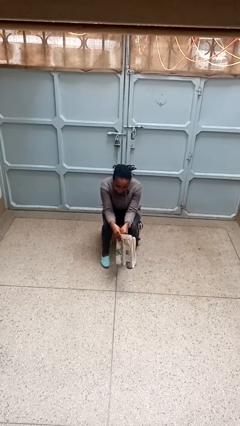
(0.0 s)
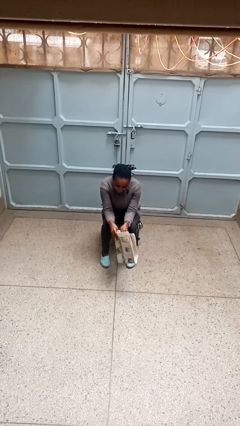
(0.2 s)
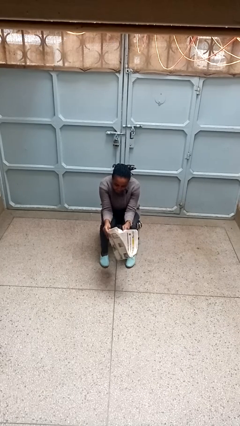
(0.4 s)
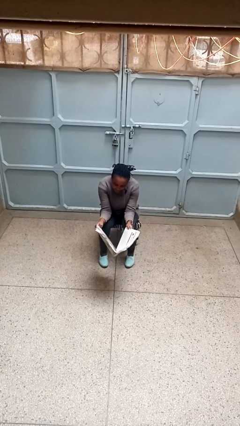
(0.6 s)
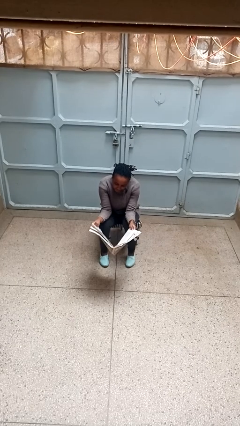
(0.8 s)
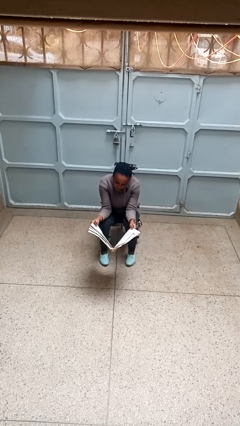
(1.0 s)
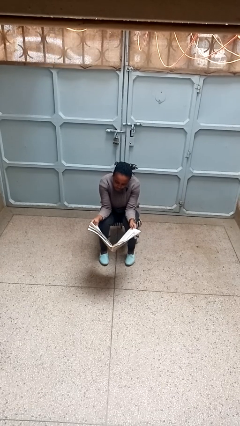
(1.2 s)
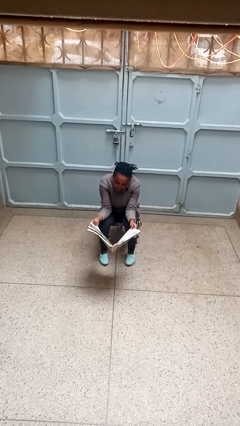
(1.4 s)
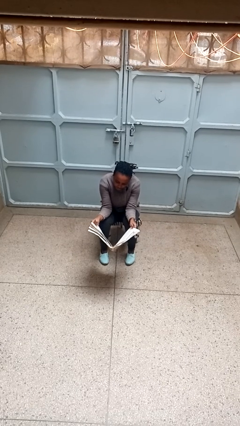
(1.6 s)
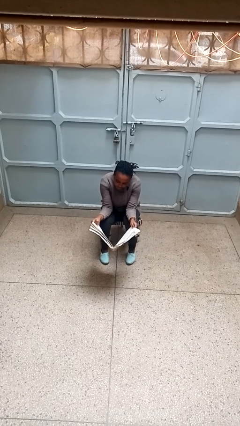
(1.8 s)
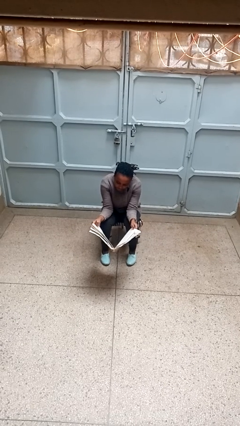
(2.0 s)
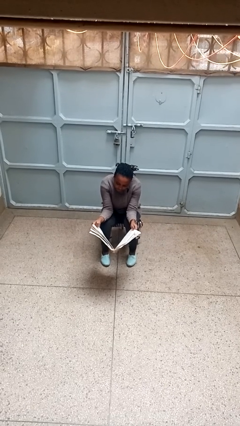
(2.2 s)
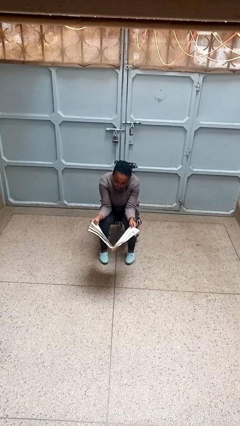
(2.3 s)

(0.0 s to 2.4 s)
person reads newspaper

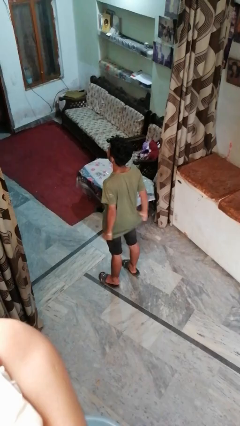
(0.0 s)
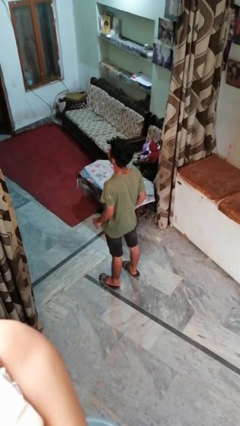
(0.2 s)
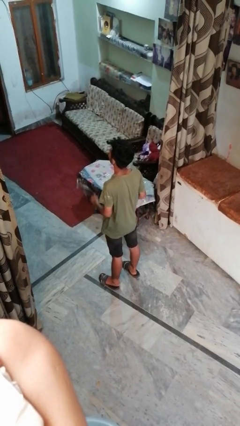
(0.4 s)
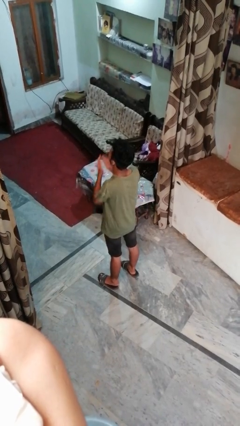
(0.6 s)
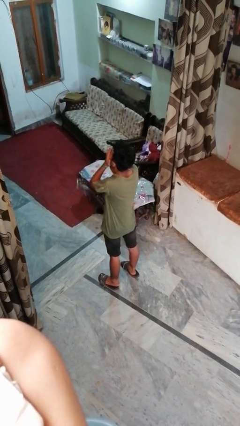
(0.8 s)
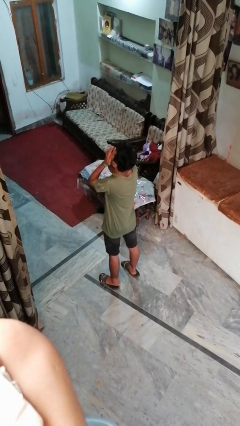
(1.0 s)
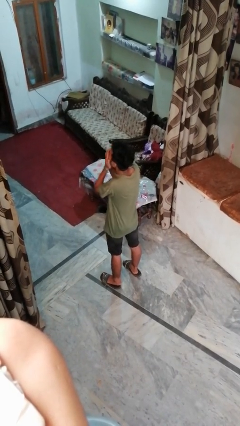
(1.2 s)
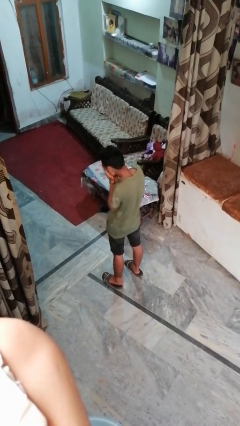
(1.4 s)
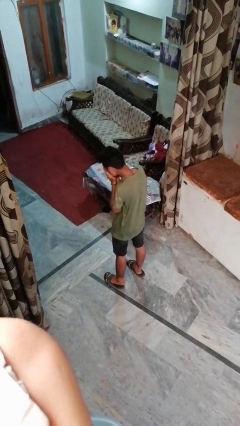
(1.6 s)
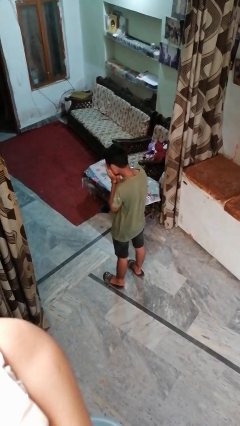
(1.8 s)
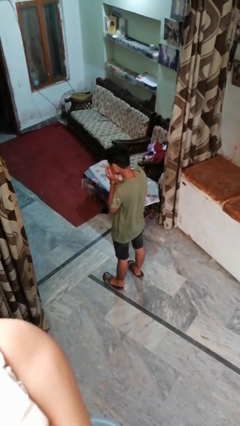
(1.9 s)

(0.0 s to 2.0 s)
person sneezes into hand

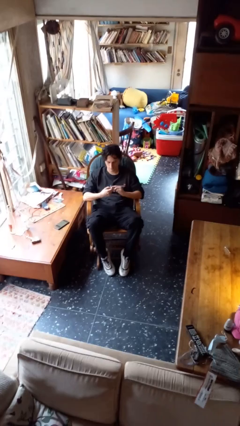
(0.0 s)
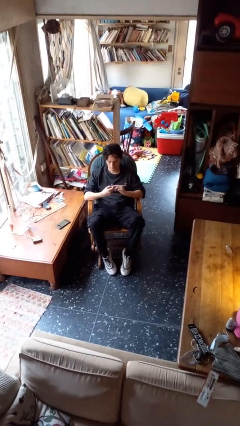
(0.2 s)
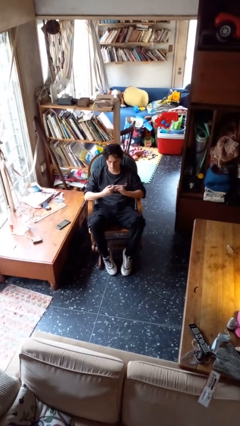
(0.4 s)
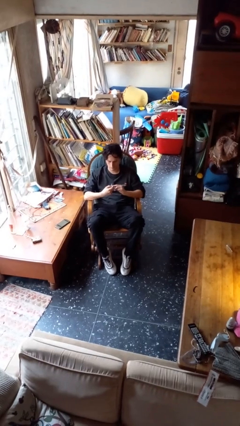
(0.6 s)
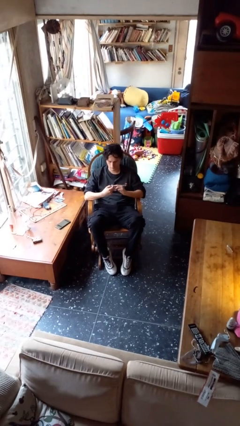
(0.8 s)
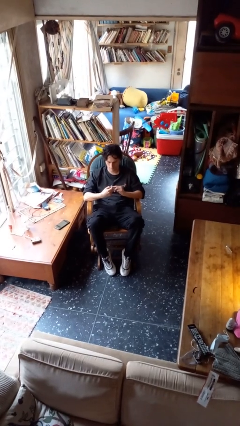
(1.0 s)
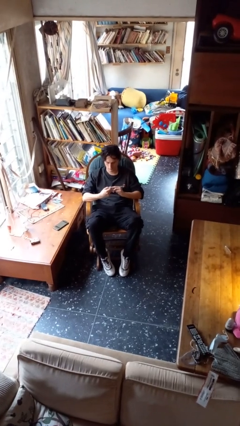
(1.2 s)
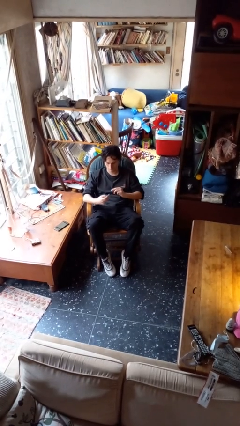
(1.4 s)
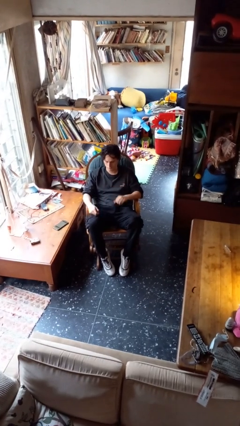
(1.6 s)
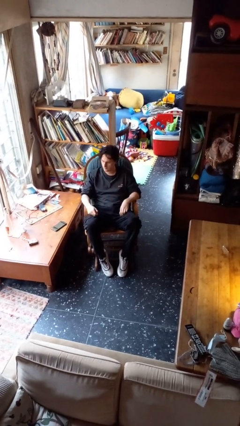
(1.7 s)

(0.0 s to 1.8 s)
person files fingernails

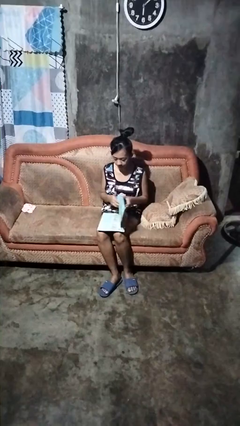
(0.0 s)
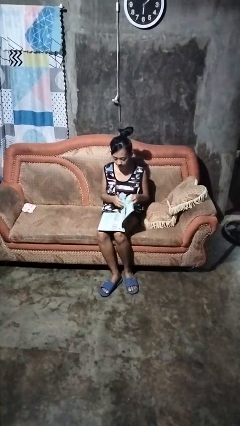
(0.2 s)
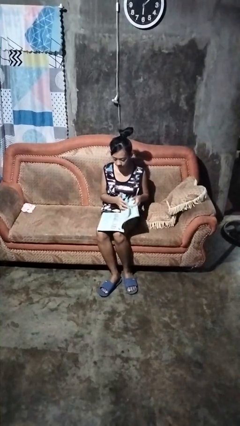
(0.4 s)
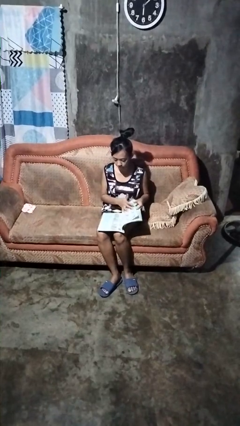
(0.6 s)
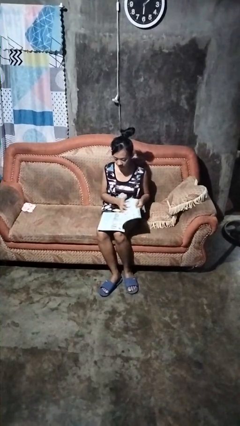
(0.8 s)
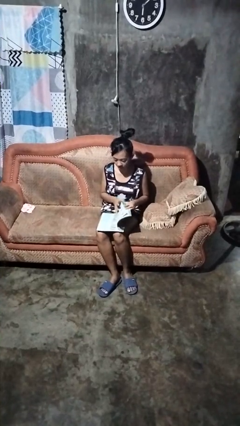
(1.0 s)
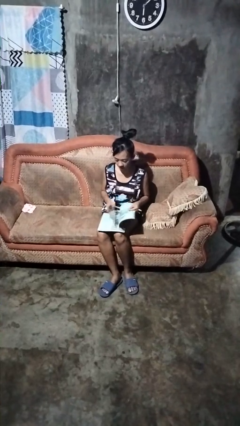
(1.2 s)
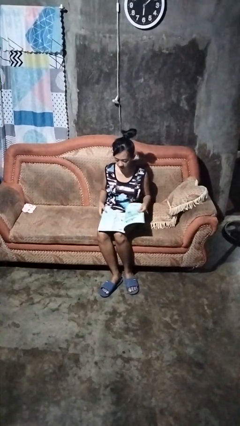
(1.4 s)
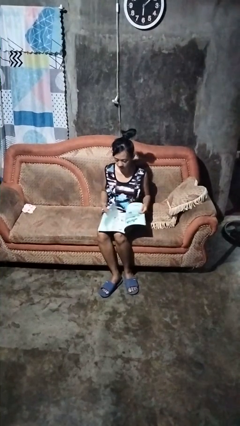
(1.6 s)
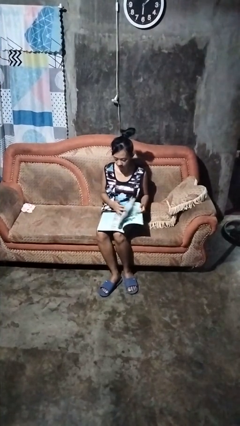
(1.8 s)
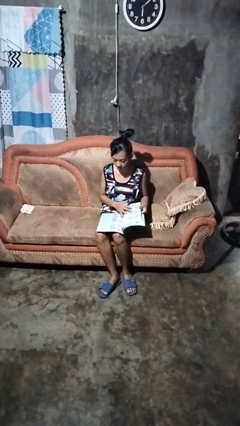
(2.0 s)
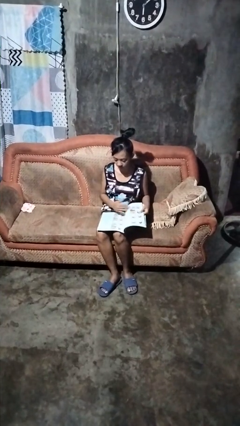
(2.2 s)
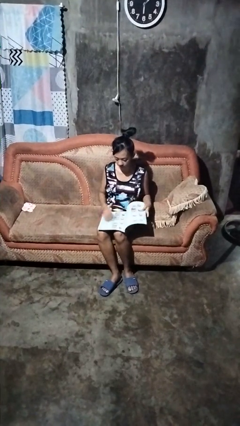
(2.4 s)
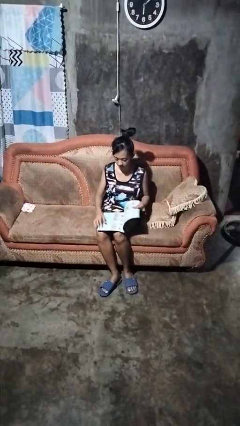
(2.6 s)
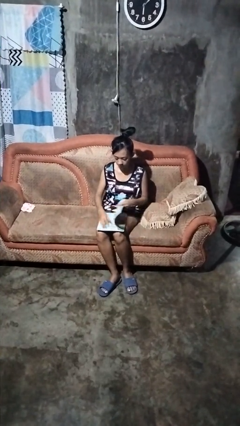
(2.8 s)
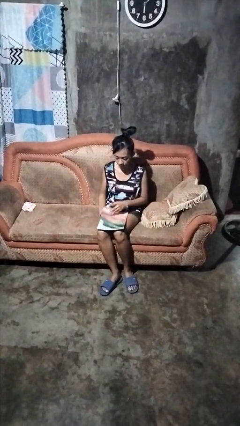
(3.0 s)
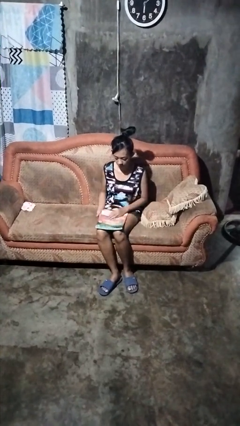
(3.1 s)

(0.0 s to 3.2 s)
person reads magazine

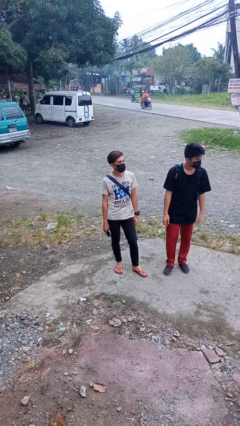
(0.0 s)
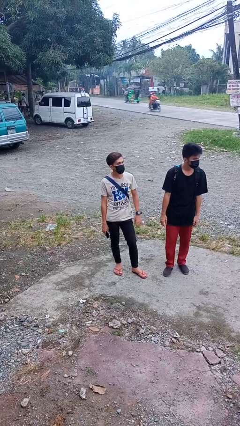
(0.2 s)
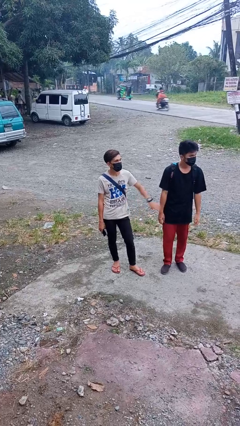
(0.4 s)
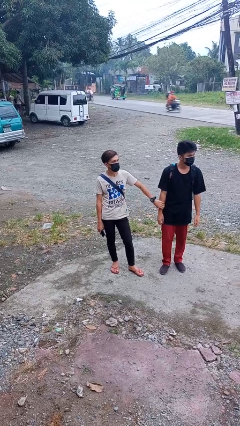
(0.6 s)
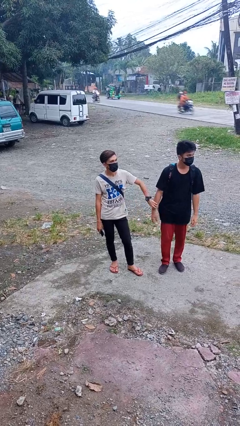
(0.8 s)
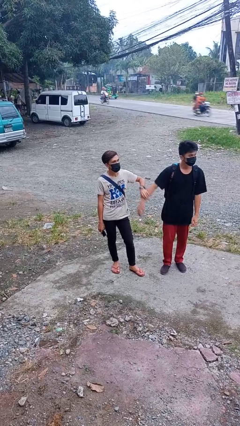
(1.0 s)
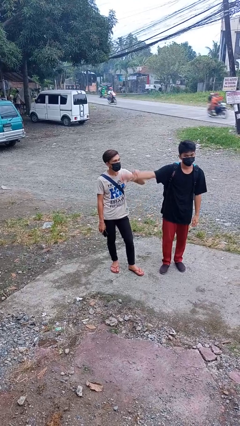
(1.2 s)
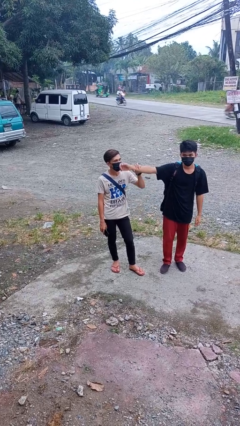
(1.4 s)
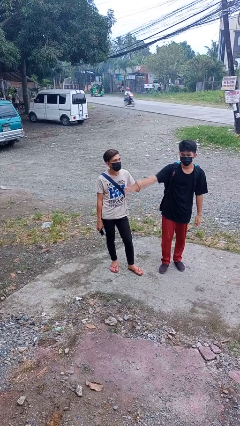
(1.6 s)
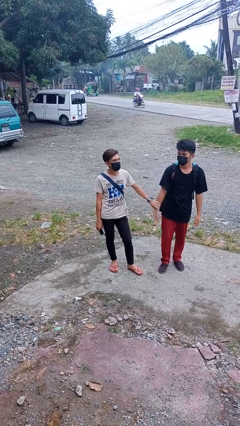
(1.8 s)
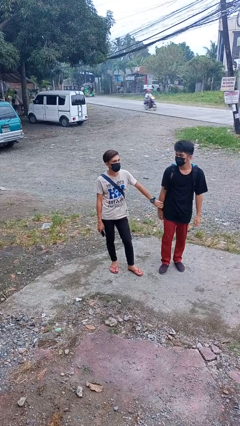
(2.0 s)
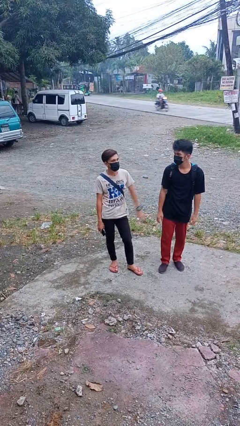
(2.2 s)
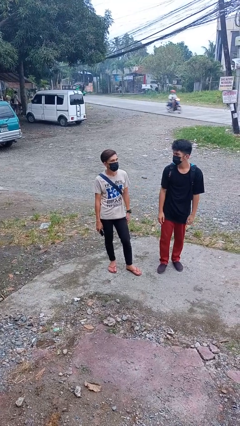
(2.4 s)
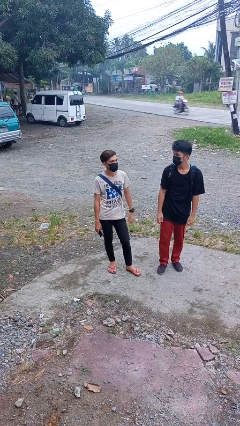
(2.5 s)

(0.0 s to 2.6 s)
person grabs person by forearm

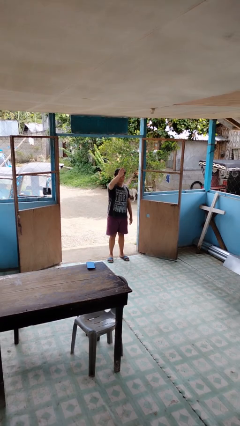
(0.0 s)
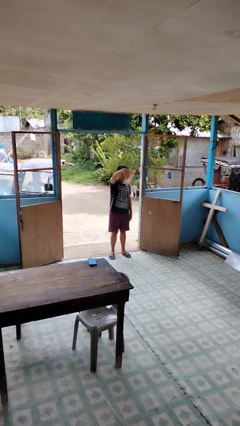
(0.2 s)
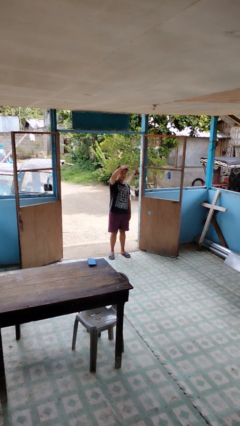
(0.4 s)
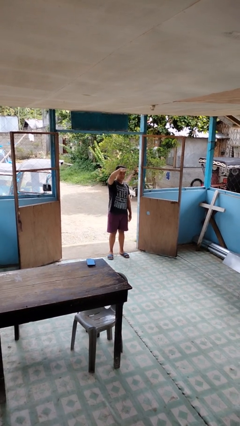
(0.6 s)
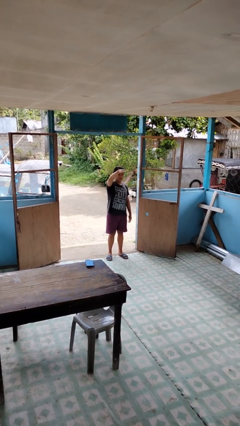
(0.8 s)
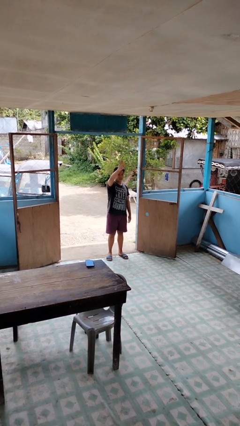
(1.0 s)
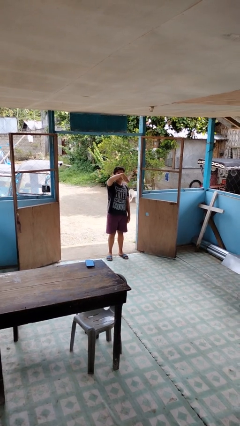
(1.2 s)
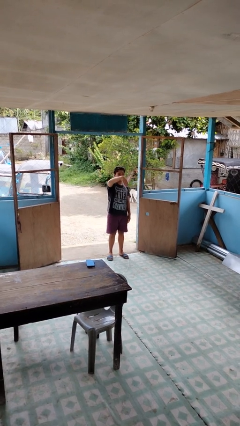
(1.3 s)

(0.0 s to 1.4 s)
person gestures come here

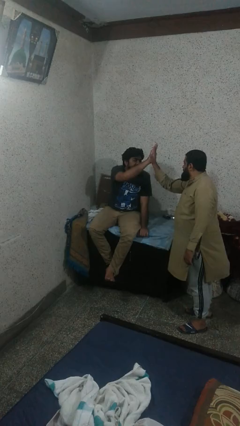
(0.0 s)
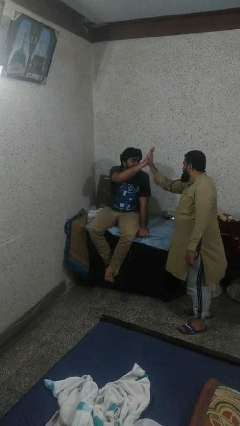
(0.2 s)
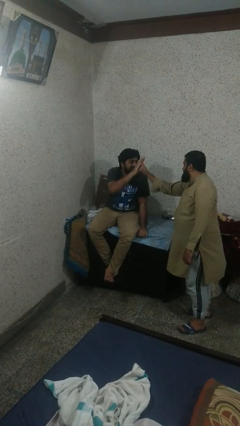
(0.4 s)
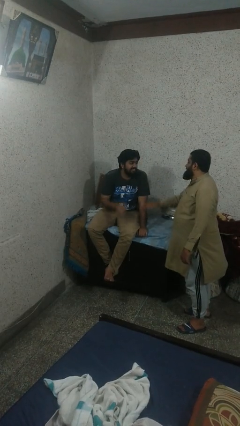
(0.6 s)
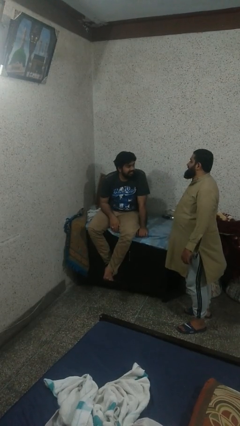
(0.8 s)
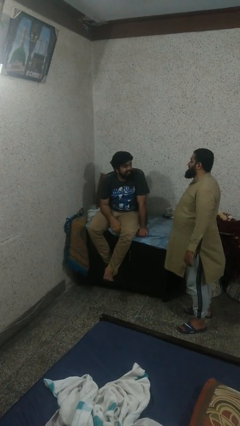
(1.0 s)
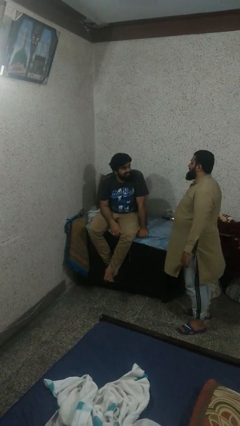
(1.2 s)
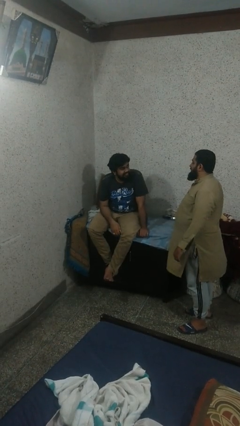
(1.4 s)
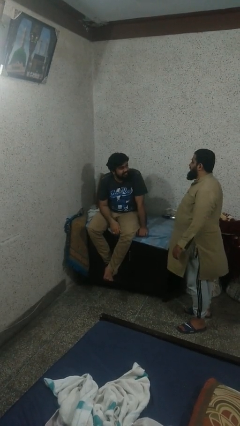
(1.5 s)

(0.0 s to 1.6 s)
person highfives hand

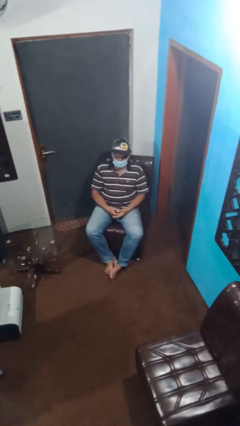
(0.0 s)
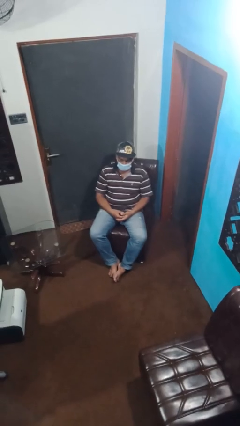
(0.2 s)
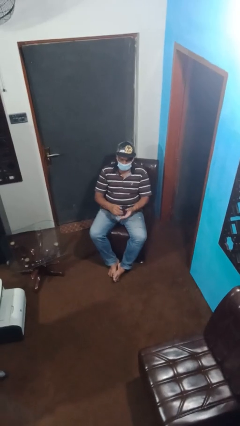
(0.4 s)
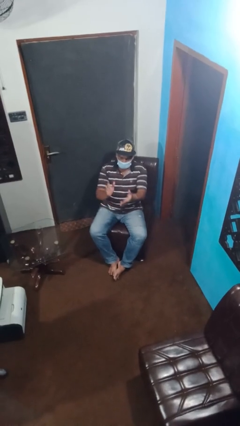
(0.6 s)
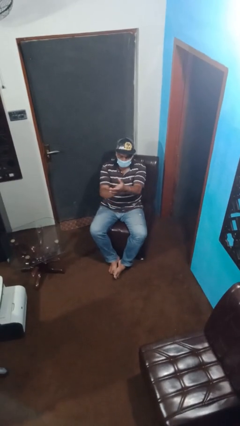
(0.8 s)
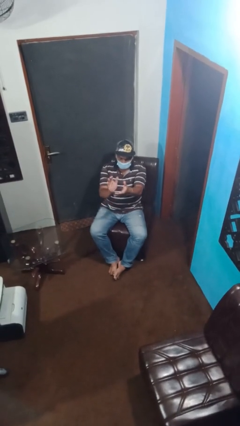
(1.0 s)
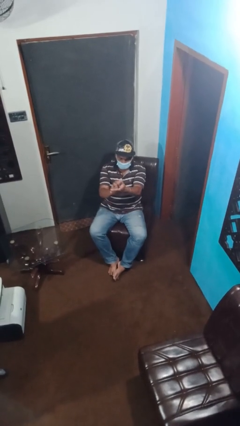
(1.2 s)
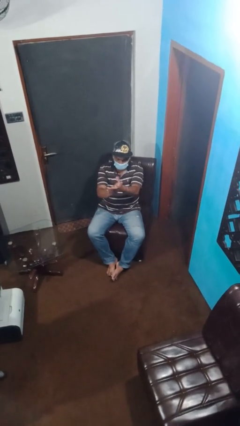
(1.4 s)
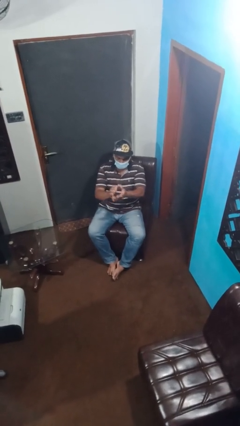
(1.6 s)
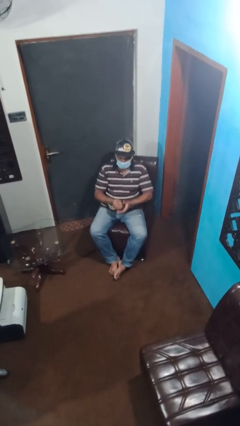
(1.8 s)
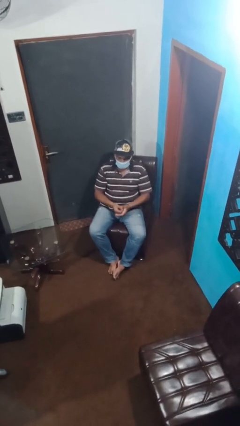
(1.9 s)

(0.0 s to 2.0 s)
person claps hands
